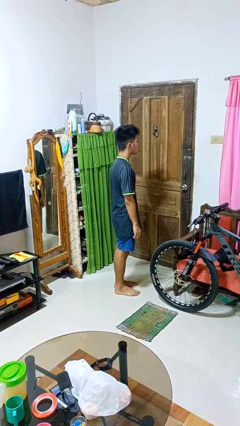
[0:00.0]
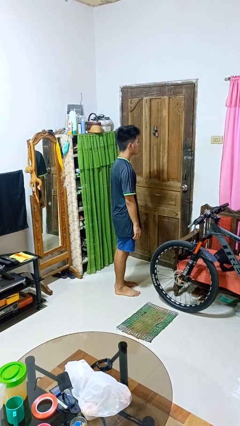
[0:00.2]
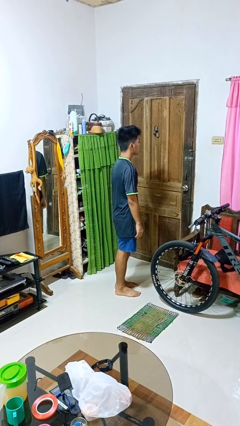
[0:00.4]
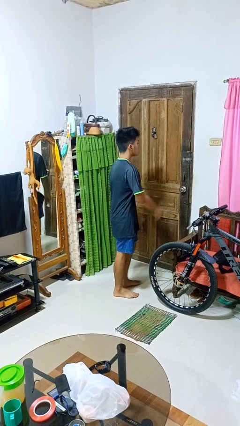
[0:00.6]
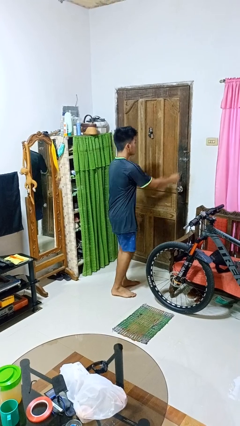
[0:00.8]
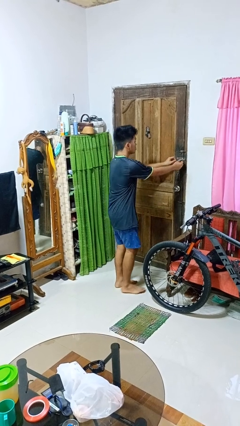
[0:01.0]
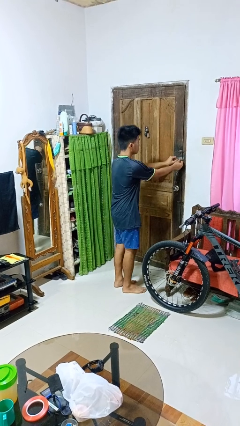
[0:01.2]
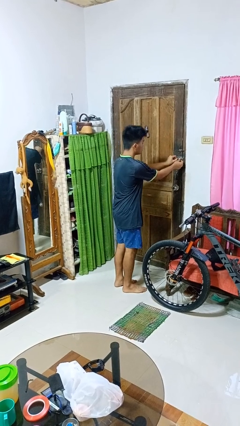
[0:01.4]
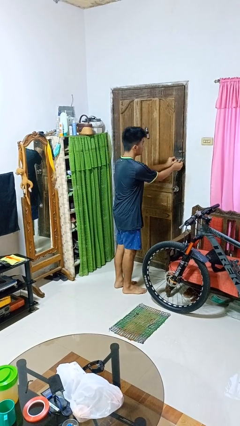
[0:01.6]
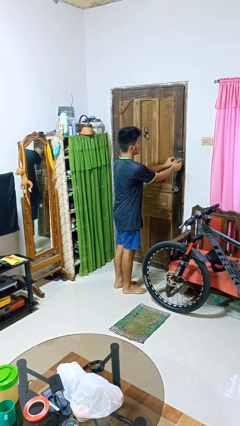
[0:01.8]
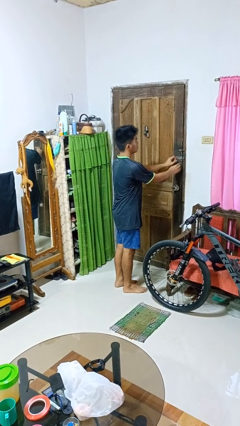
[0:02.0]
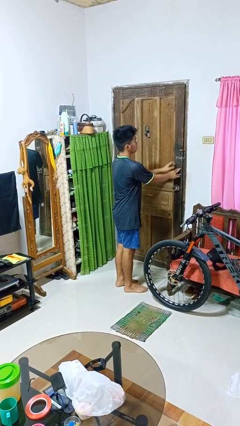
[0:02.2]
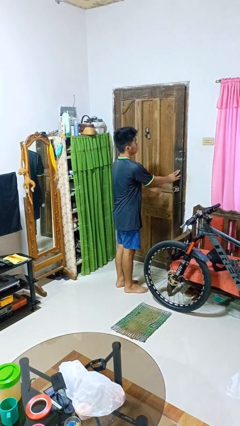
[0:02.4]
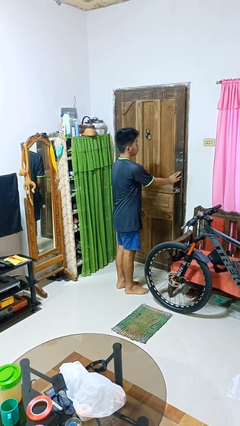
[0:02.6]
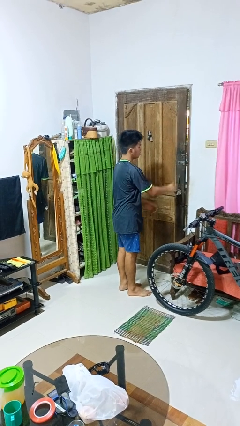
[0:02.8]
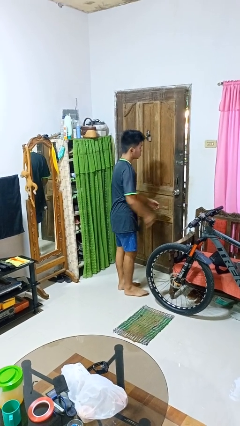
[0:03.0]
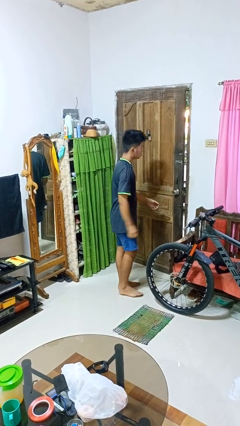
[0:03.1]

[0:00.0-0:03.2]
person unlocks door with keys

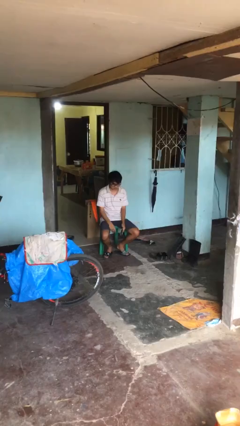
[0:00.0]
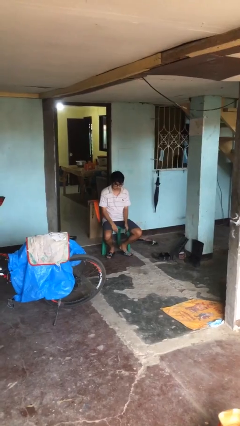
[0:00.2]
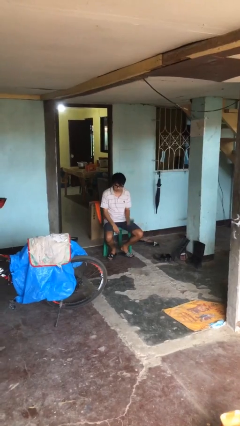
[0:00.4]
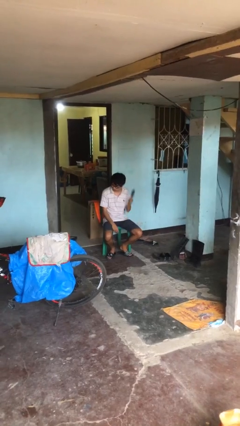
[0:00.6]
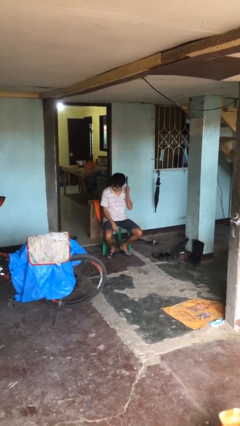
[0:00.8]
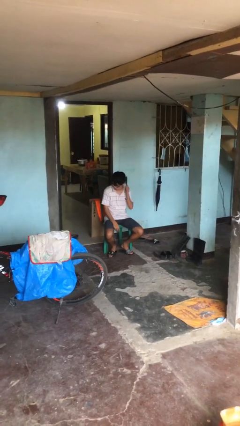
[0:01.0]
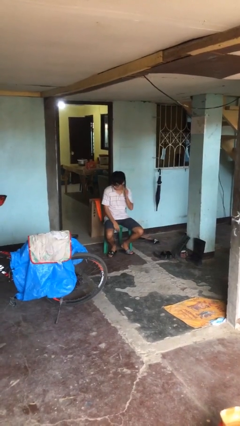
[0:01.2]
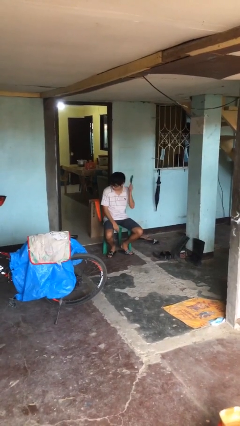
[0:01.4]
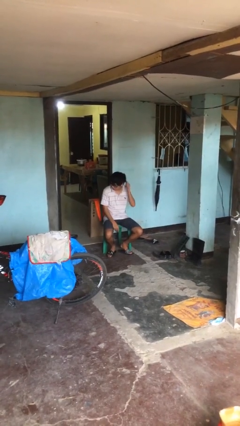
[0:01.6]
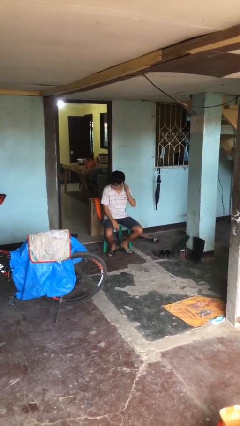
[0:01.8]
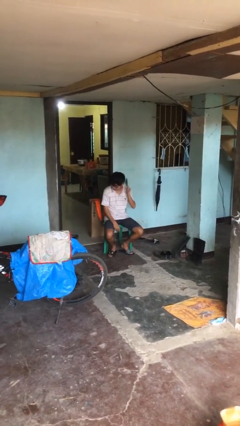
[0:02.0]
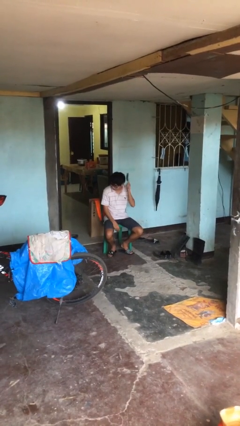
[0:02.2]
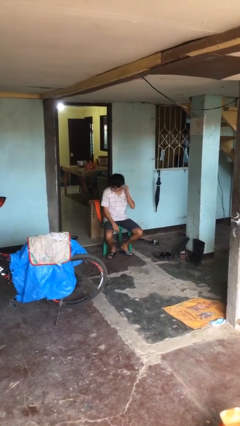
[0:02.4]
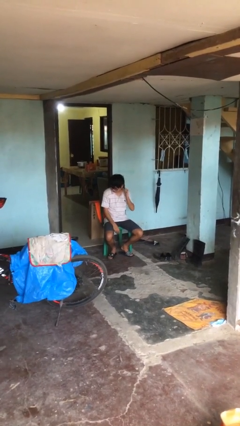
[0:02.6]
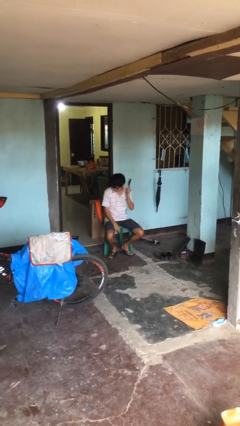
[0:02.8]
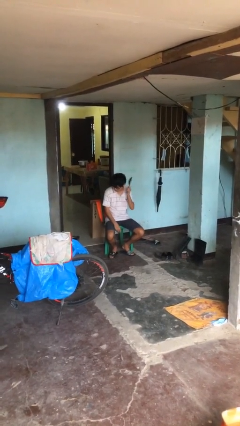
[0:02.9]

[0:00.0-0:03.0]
person brushes hair

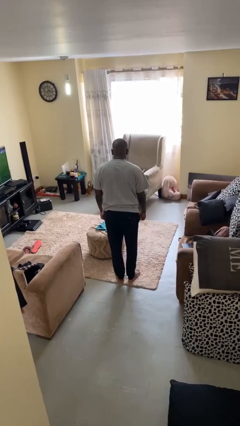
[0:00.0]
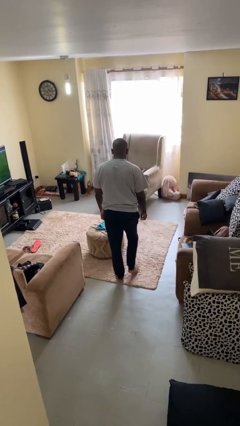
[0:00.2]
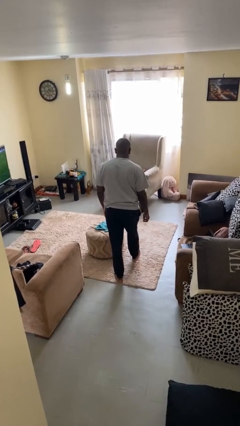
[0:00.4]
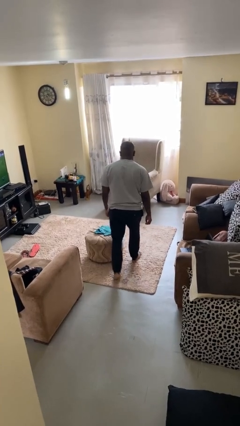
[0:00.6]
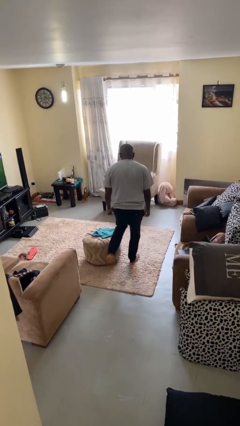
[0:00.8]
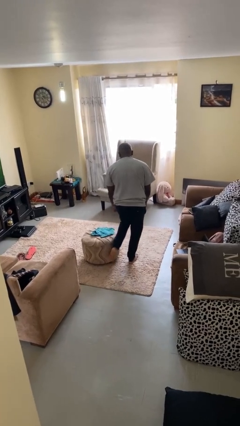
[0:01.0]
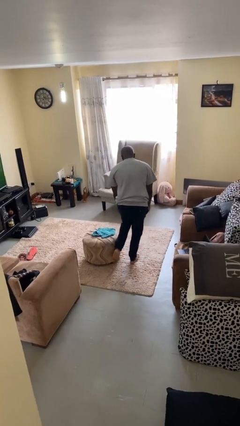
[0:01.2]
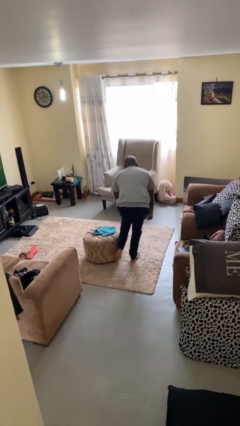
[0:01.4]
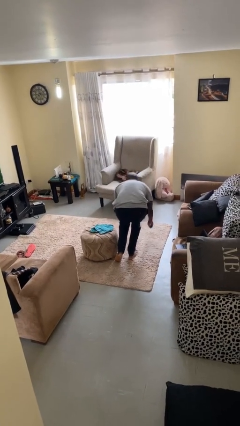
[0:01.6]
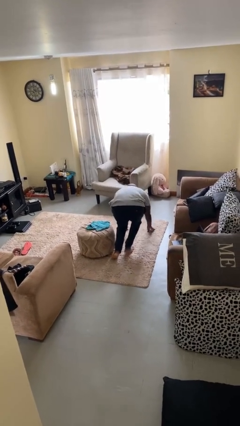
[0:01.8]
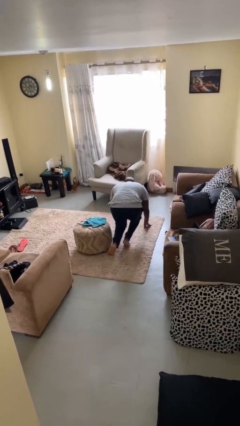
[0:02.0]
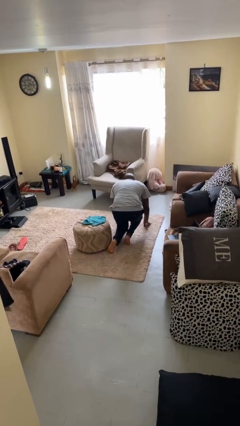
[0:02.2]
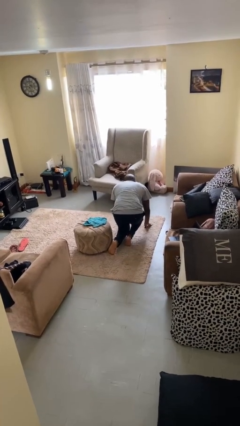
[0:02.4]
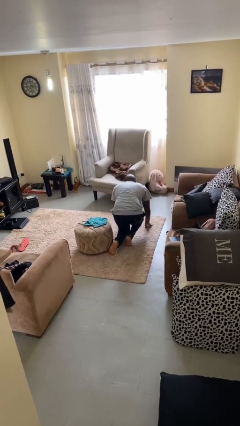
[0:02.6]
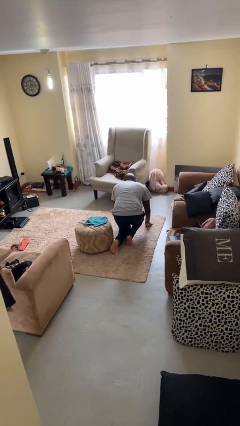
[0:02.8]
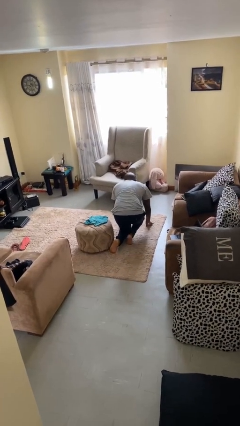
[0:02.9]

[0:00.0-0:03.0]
person trips on object on floor

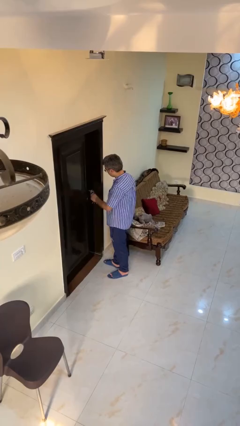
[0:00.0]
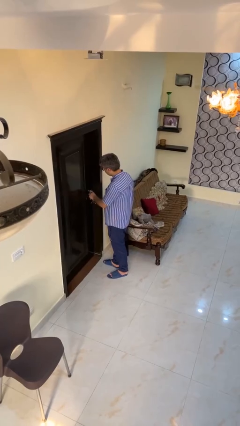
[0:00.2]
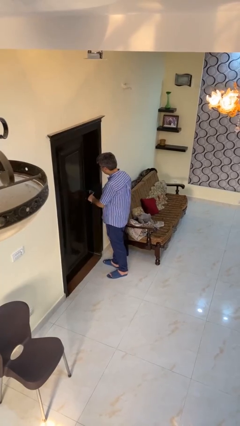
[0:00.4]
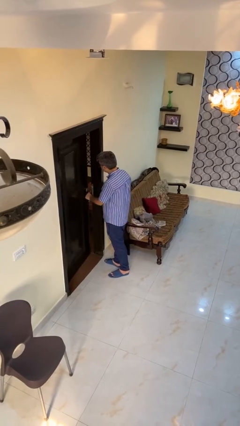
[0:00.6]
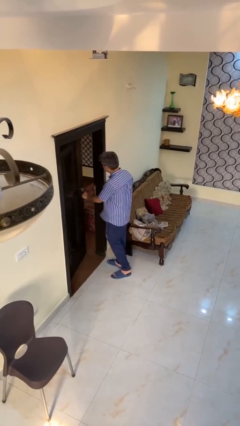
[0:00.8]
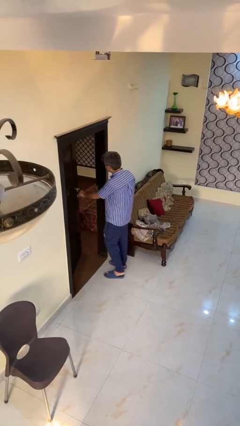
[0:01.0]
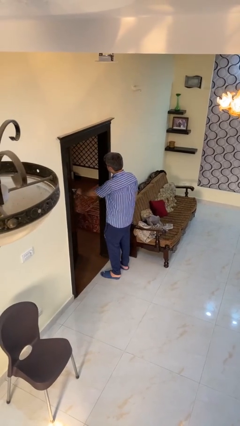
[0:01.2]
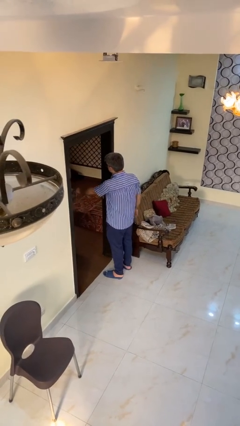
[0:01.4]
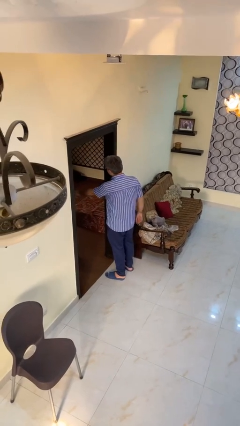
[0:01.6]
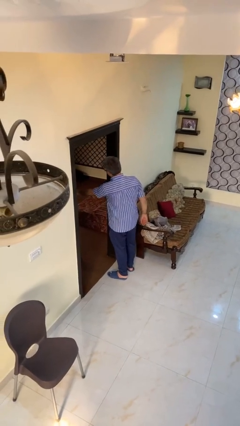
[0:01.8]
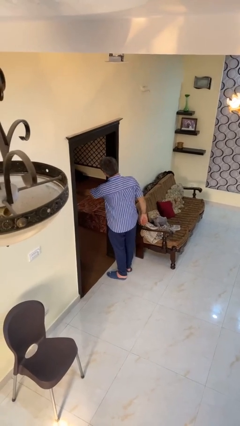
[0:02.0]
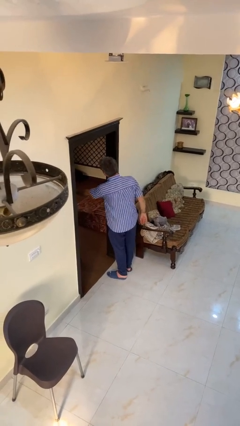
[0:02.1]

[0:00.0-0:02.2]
person opens facility door

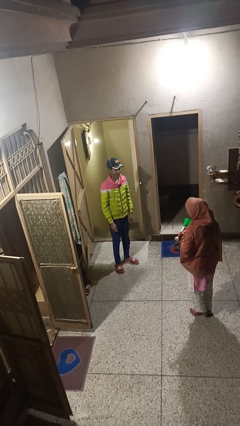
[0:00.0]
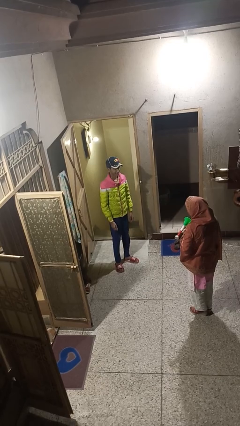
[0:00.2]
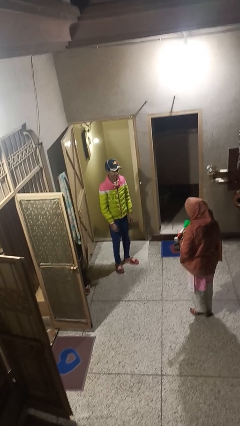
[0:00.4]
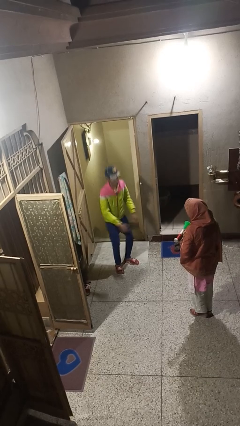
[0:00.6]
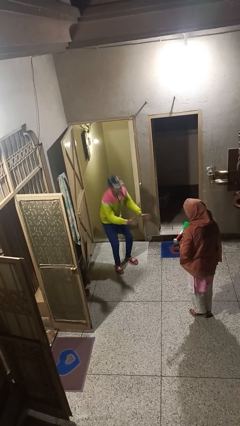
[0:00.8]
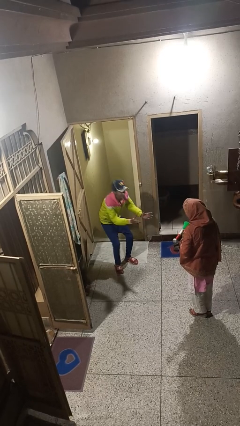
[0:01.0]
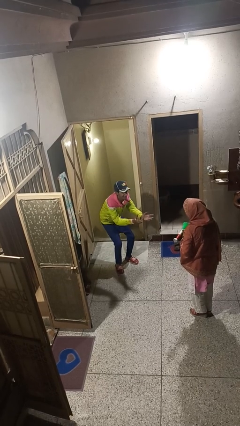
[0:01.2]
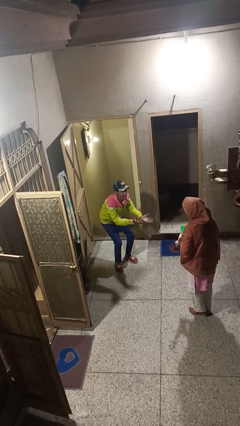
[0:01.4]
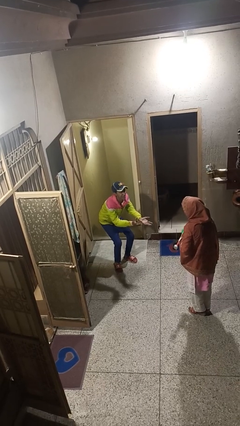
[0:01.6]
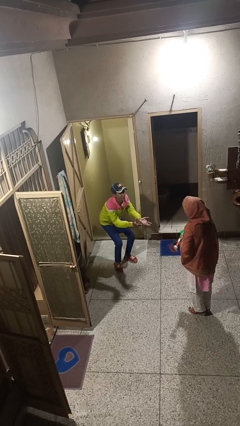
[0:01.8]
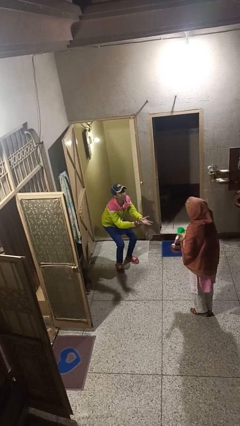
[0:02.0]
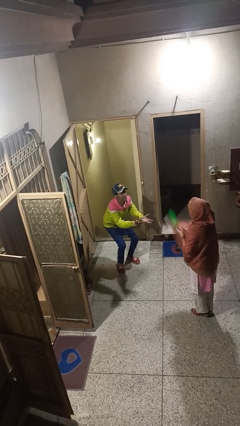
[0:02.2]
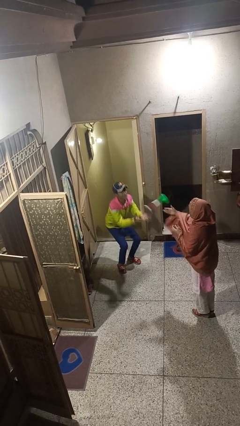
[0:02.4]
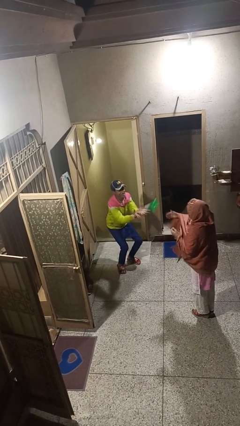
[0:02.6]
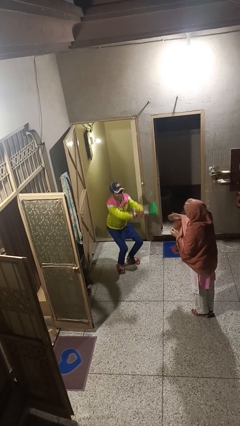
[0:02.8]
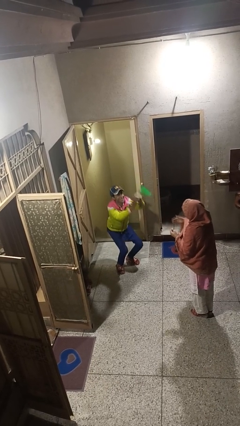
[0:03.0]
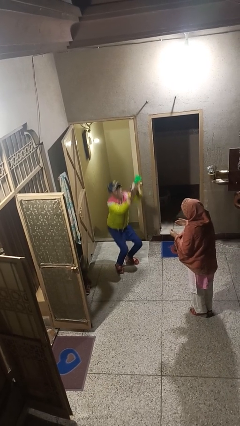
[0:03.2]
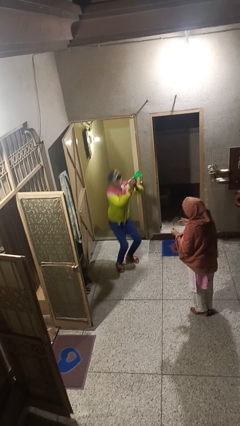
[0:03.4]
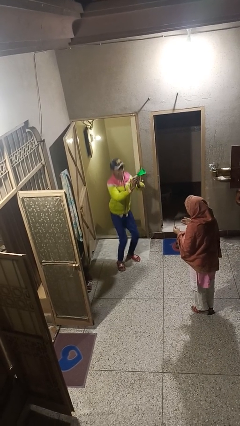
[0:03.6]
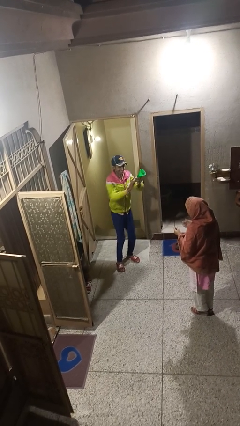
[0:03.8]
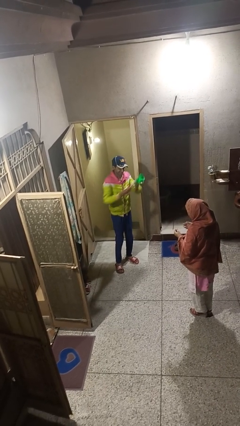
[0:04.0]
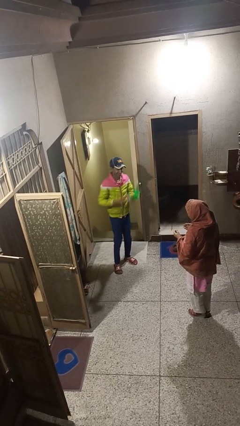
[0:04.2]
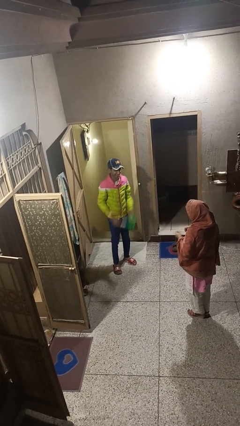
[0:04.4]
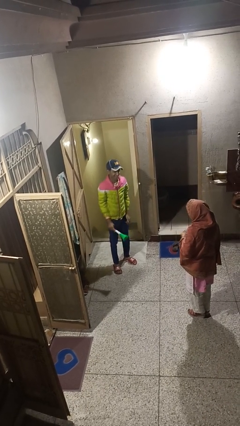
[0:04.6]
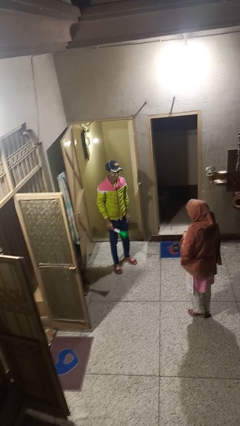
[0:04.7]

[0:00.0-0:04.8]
person catches object from person

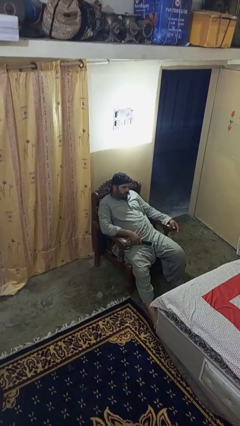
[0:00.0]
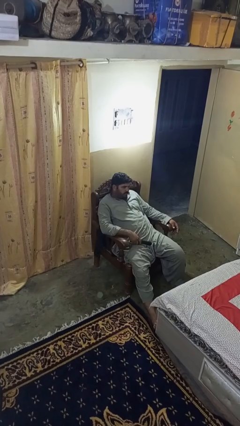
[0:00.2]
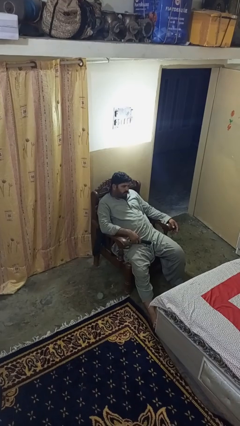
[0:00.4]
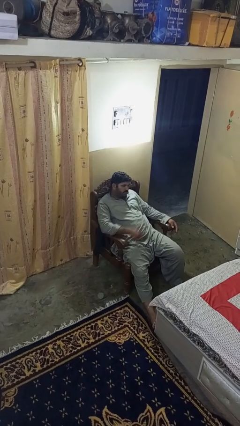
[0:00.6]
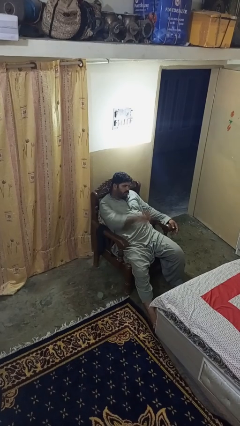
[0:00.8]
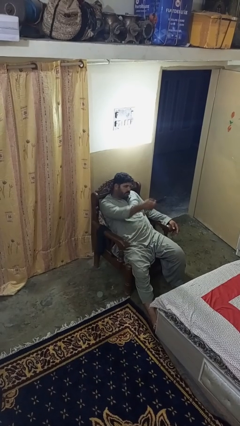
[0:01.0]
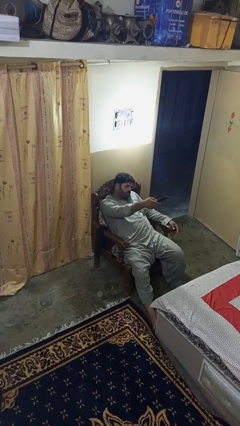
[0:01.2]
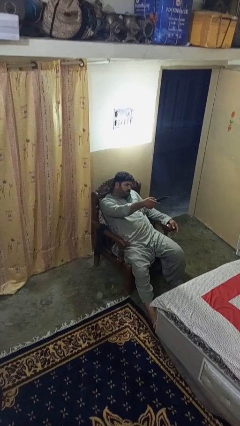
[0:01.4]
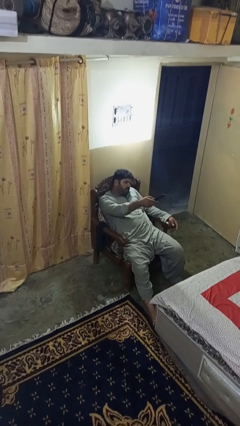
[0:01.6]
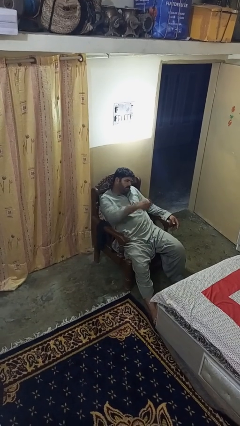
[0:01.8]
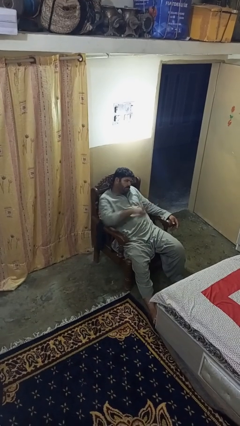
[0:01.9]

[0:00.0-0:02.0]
person uses television remote
